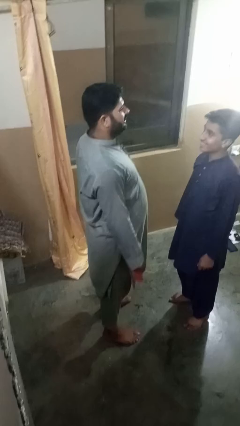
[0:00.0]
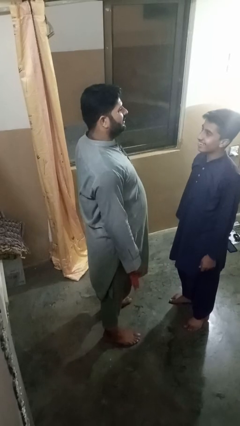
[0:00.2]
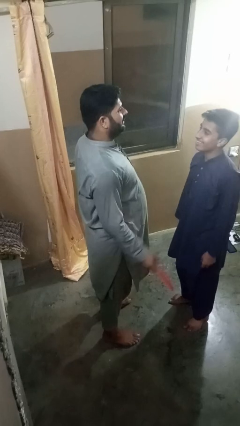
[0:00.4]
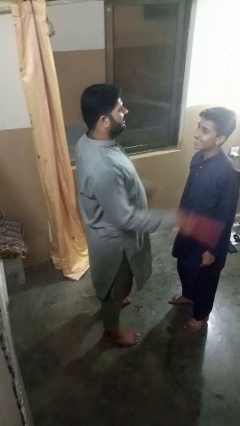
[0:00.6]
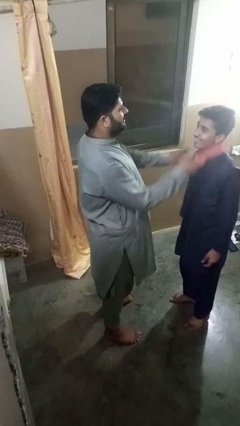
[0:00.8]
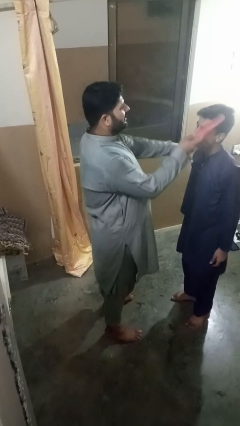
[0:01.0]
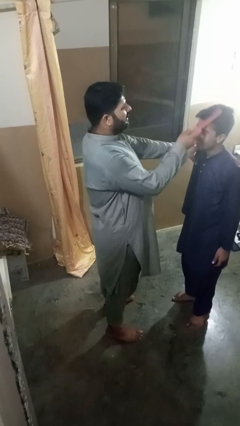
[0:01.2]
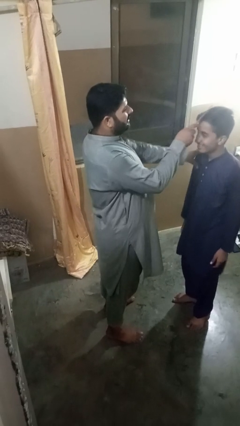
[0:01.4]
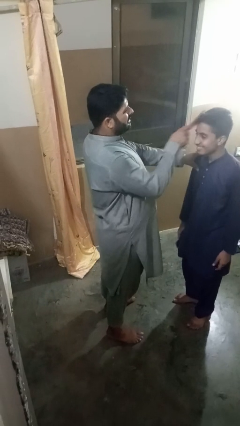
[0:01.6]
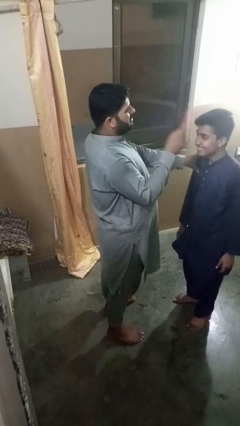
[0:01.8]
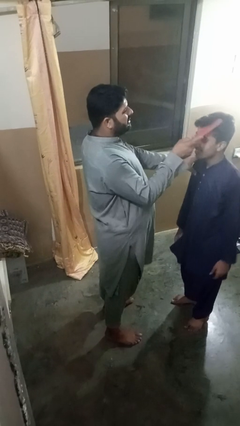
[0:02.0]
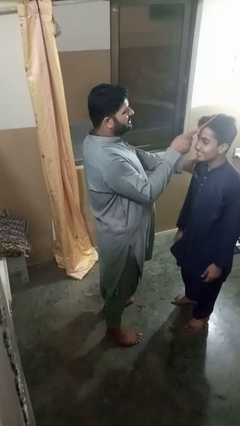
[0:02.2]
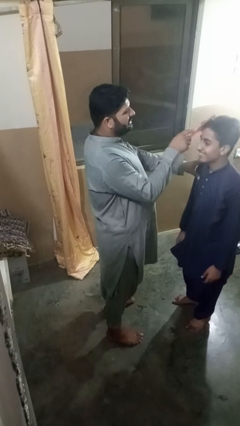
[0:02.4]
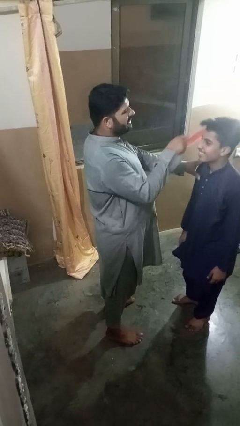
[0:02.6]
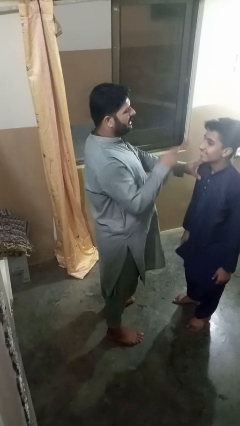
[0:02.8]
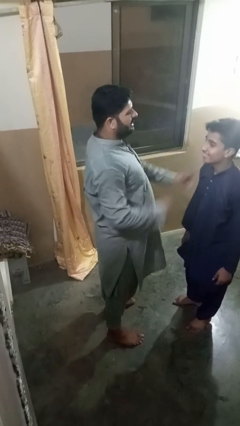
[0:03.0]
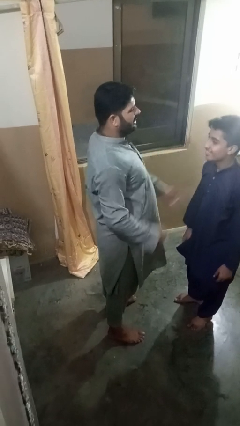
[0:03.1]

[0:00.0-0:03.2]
person brushes hair of person

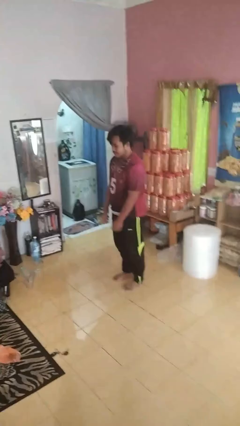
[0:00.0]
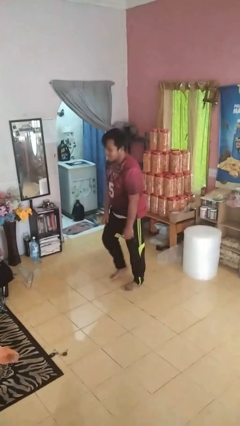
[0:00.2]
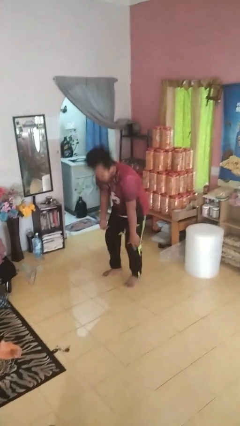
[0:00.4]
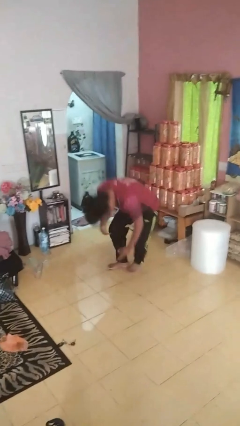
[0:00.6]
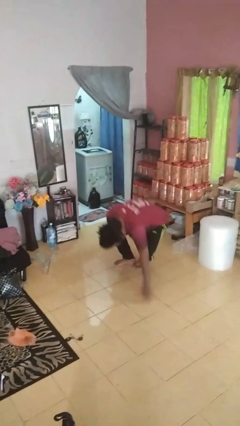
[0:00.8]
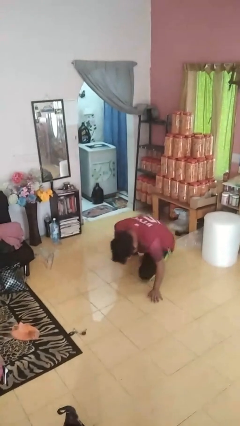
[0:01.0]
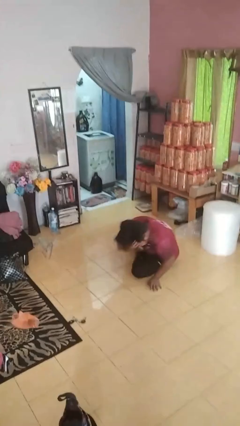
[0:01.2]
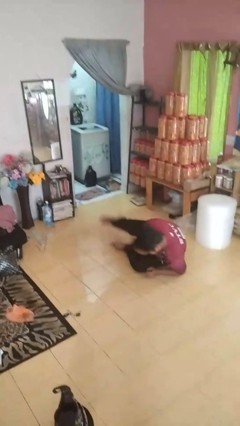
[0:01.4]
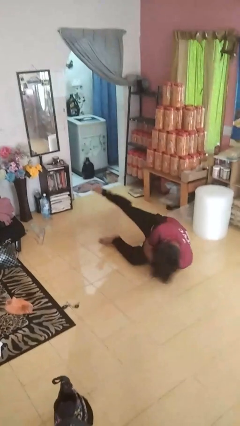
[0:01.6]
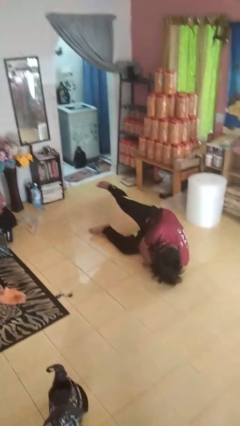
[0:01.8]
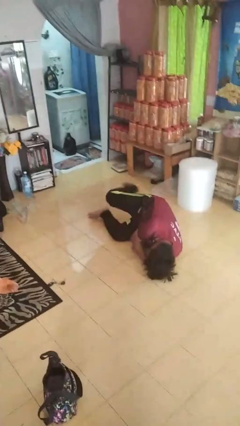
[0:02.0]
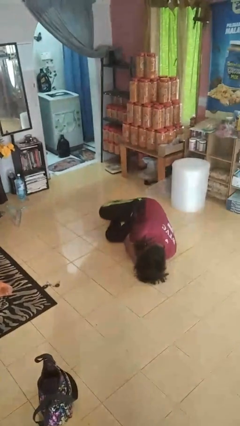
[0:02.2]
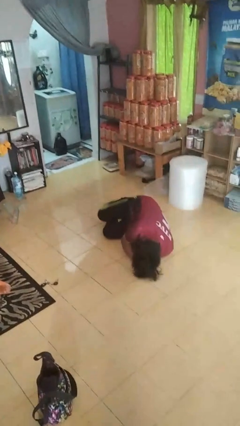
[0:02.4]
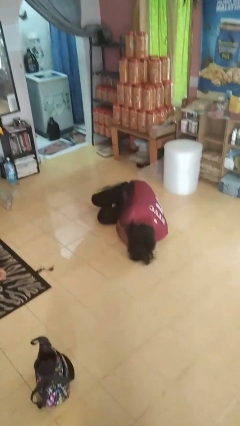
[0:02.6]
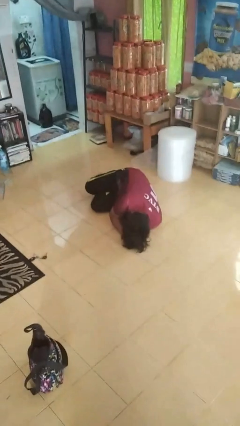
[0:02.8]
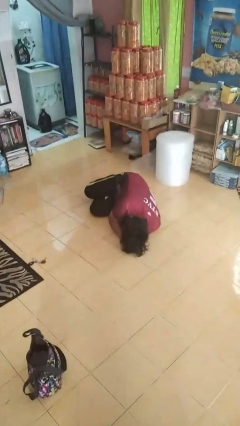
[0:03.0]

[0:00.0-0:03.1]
person falls while standing

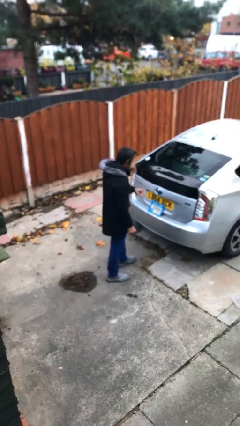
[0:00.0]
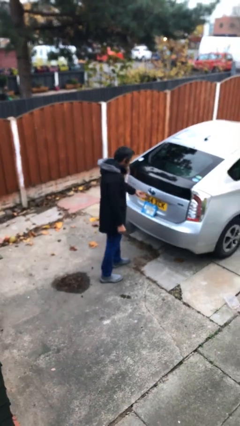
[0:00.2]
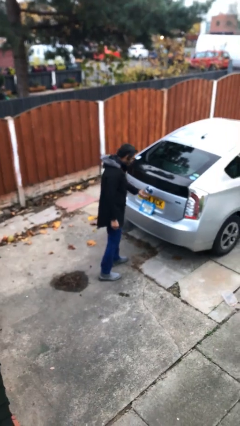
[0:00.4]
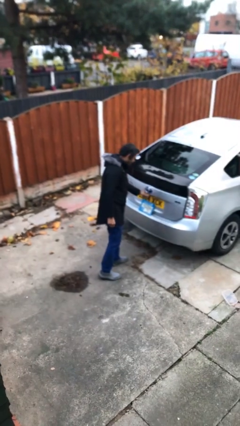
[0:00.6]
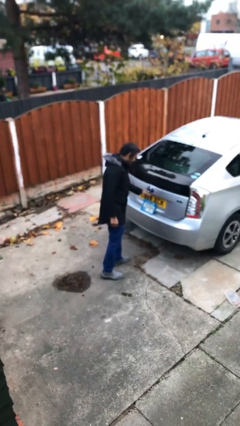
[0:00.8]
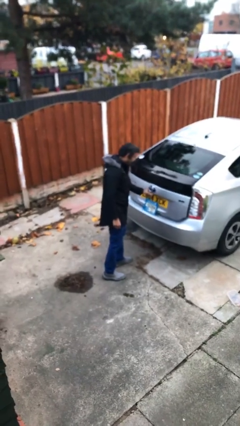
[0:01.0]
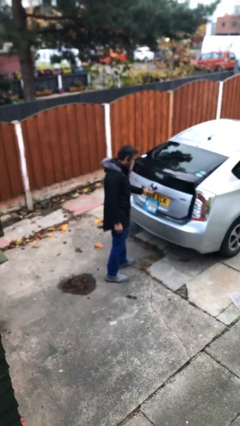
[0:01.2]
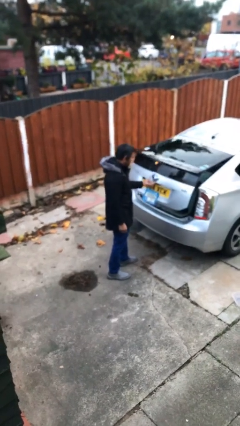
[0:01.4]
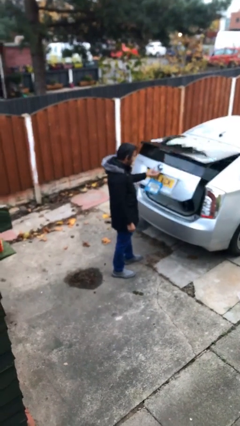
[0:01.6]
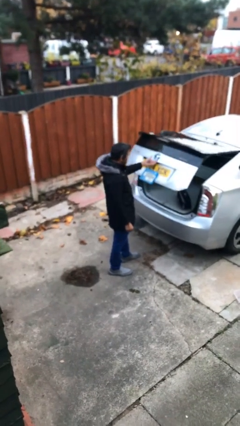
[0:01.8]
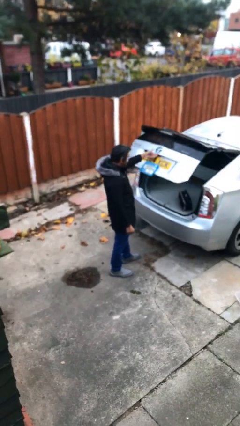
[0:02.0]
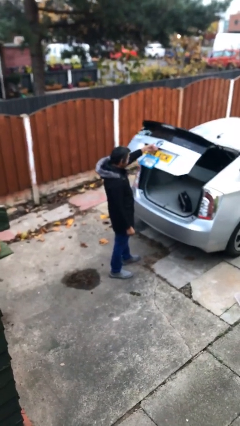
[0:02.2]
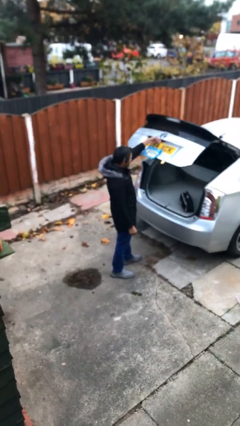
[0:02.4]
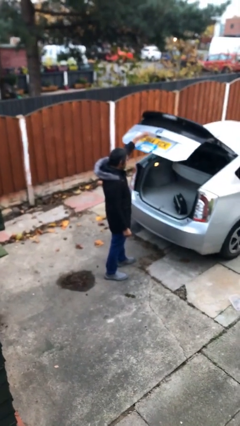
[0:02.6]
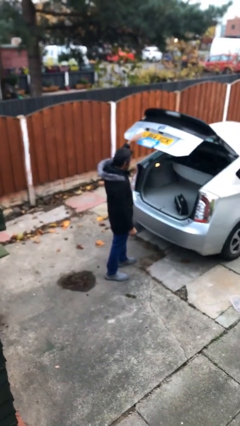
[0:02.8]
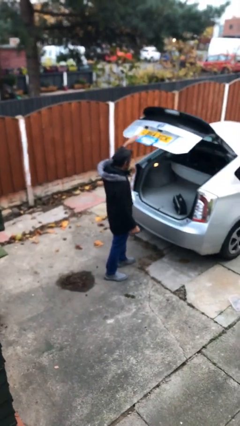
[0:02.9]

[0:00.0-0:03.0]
person opens car trunk

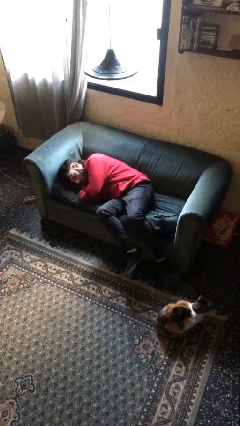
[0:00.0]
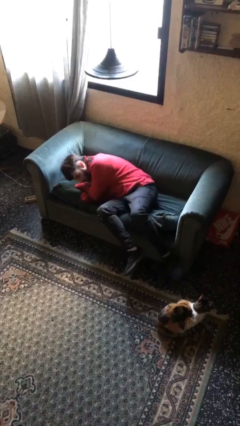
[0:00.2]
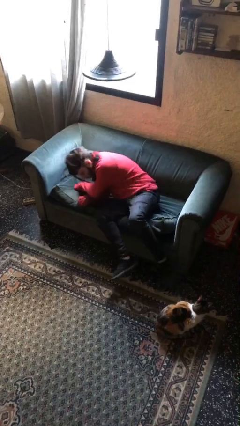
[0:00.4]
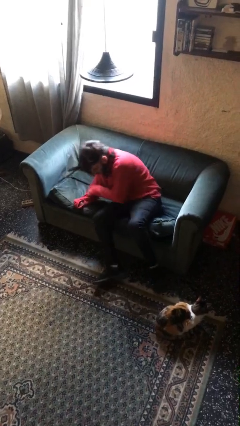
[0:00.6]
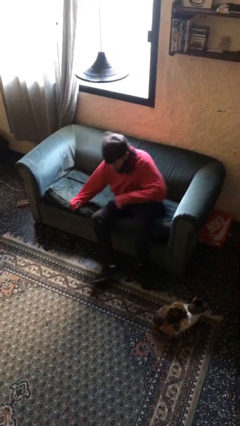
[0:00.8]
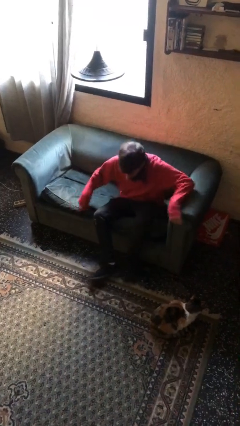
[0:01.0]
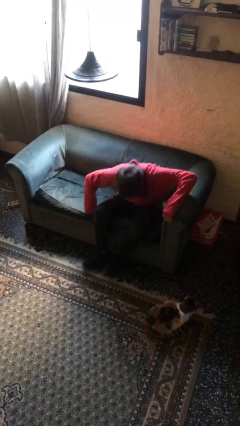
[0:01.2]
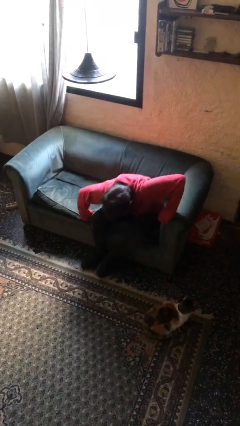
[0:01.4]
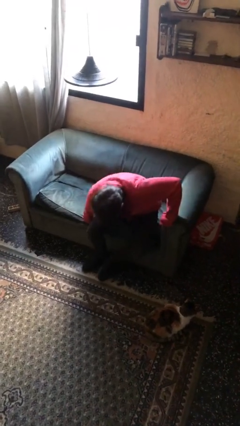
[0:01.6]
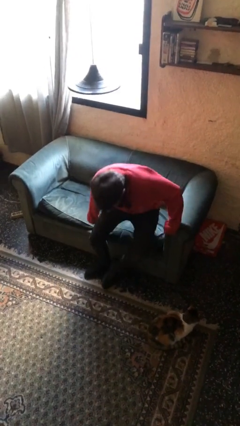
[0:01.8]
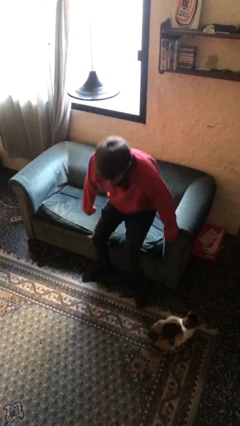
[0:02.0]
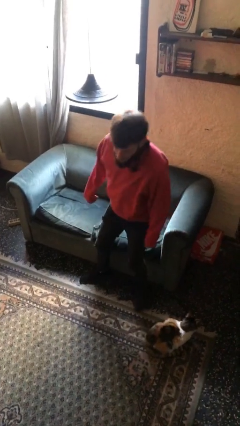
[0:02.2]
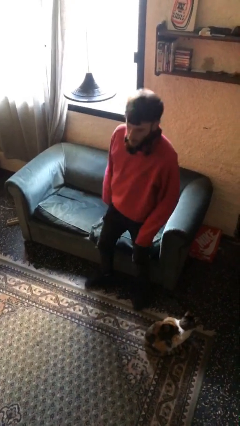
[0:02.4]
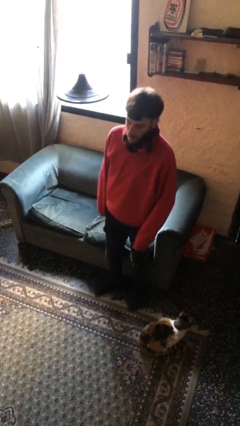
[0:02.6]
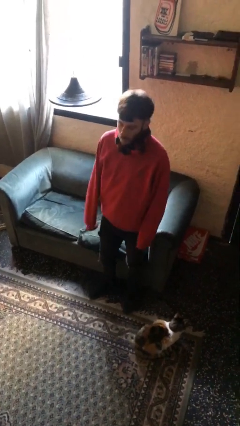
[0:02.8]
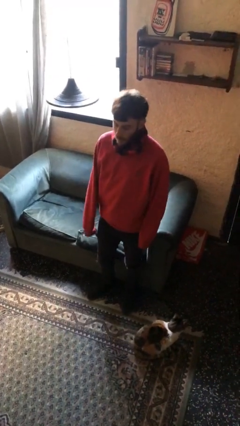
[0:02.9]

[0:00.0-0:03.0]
person stands up

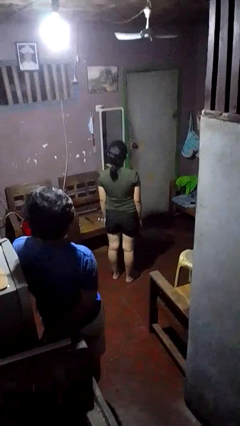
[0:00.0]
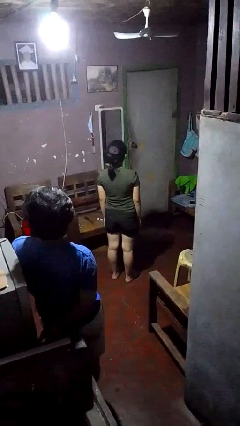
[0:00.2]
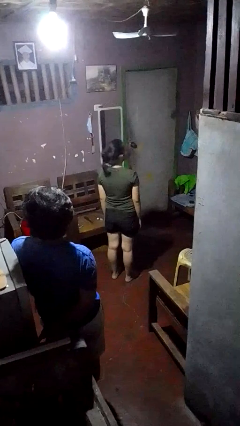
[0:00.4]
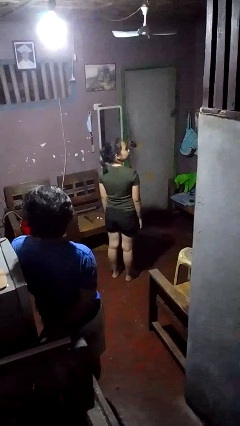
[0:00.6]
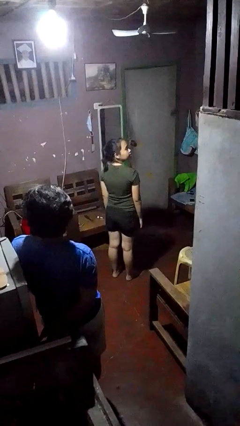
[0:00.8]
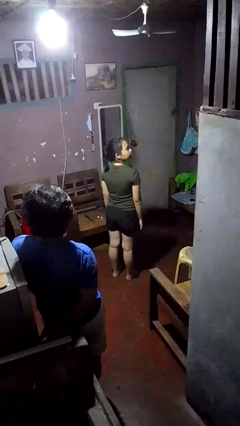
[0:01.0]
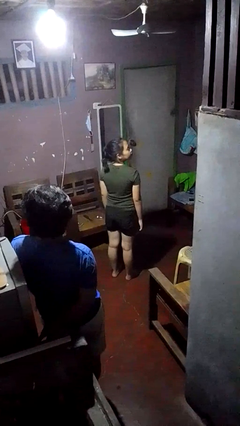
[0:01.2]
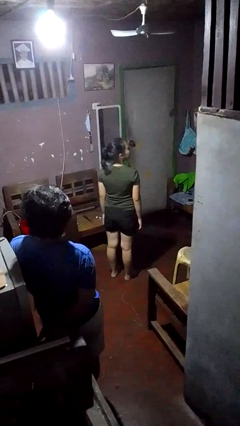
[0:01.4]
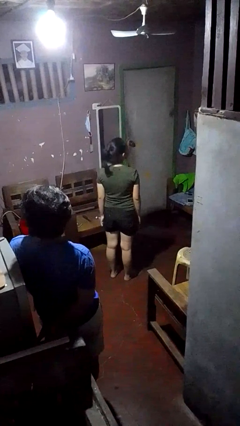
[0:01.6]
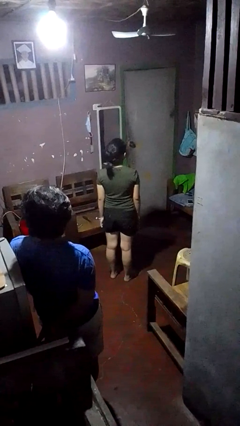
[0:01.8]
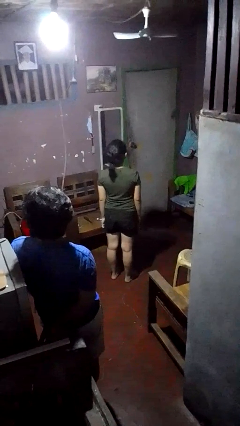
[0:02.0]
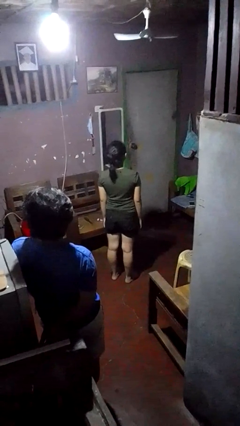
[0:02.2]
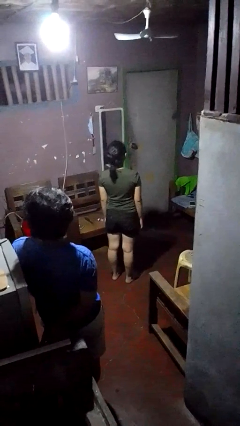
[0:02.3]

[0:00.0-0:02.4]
person looks over shoulder

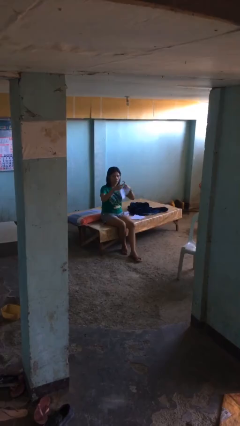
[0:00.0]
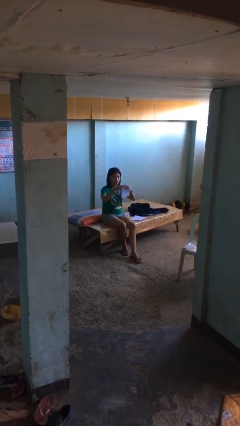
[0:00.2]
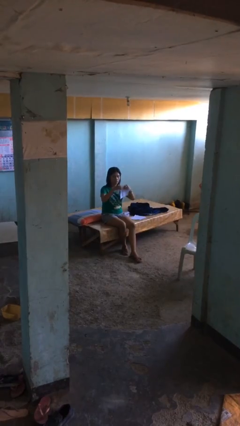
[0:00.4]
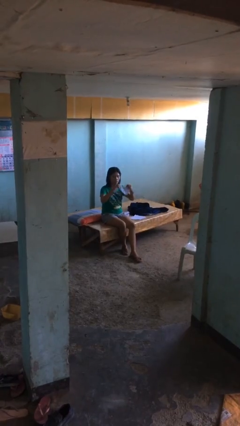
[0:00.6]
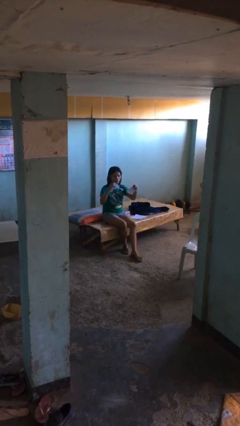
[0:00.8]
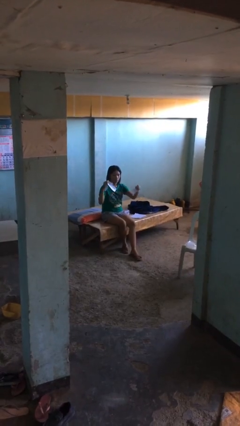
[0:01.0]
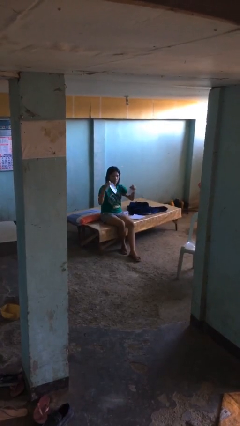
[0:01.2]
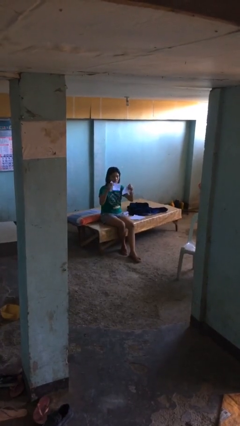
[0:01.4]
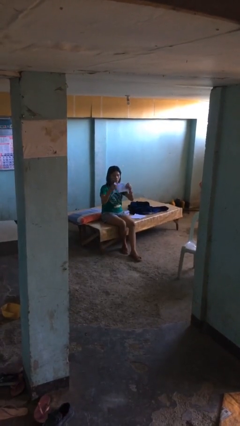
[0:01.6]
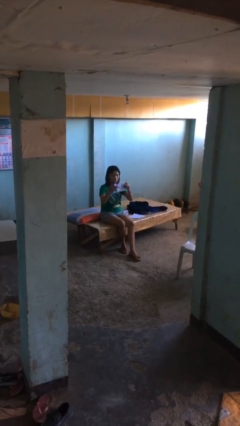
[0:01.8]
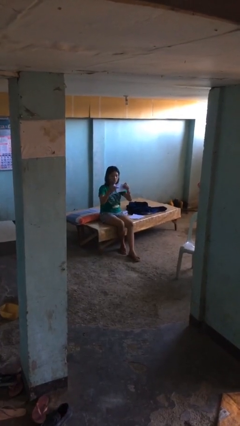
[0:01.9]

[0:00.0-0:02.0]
person tears paper

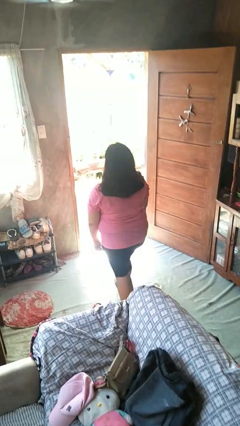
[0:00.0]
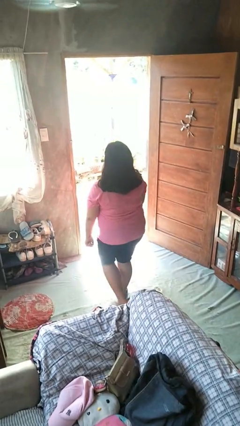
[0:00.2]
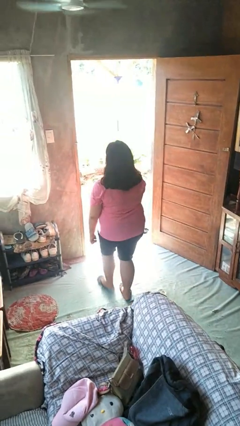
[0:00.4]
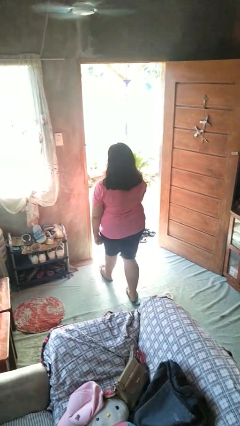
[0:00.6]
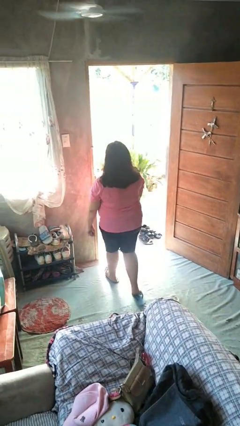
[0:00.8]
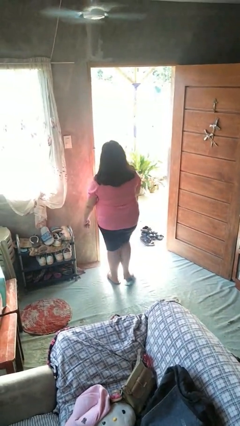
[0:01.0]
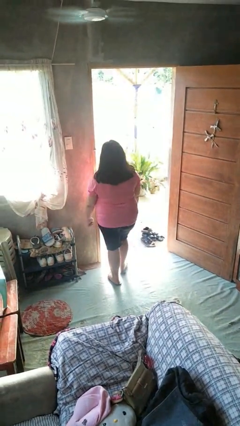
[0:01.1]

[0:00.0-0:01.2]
person bumps into wall
